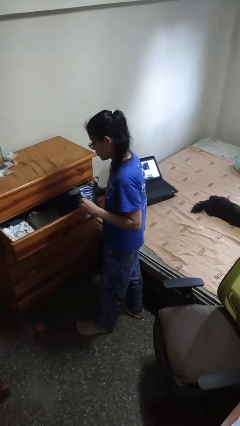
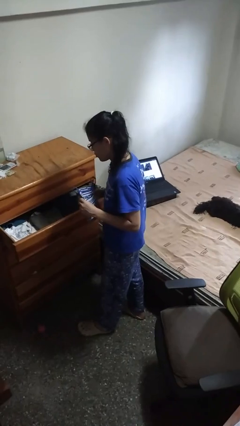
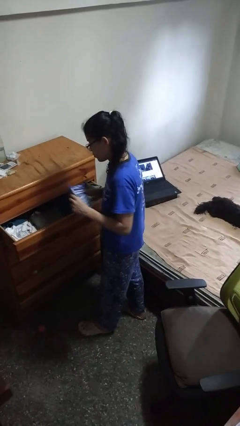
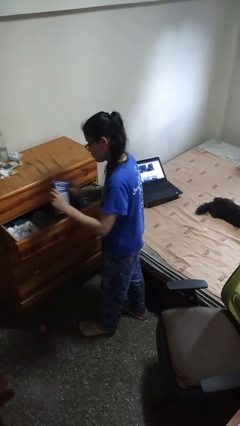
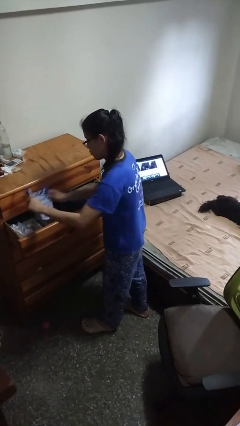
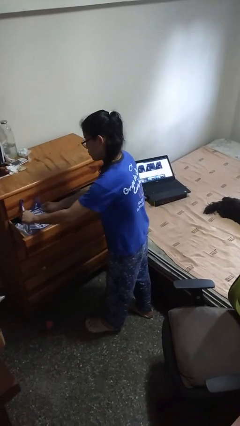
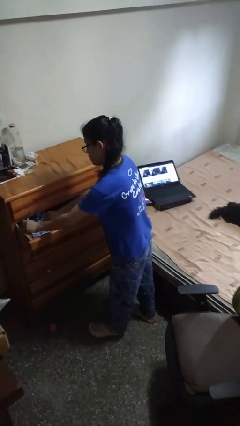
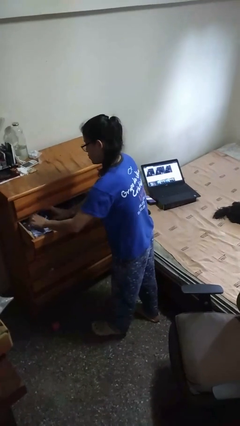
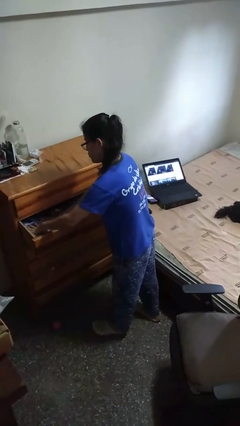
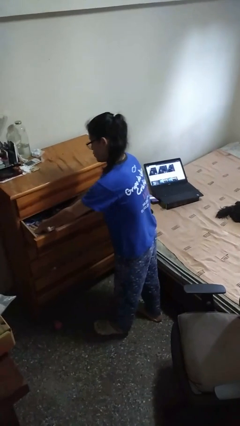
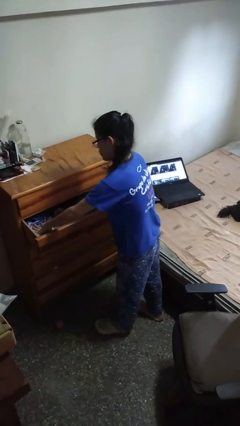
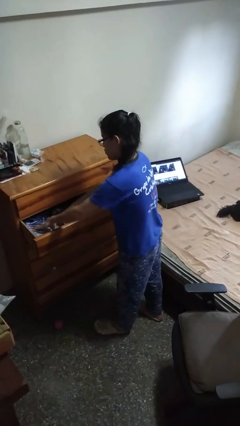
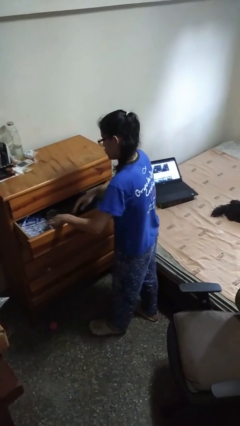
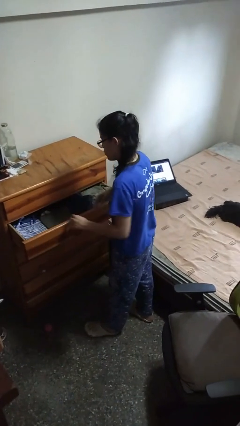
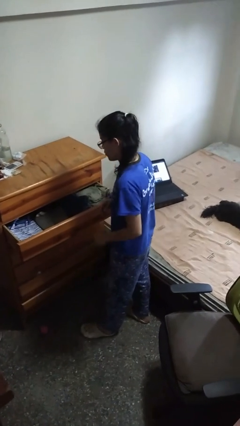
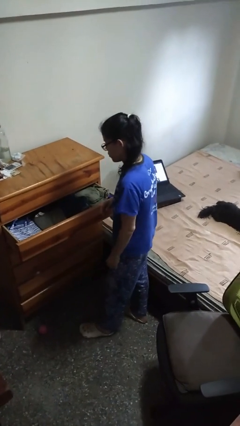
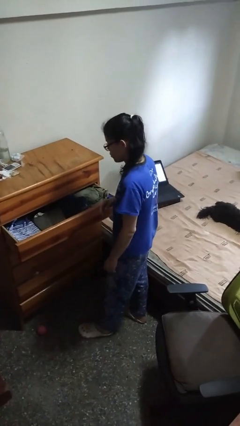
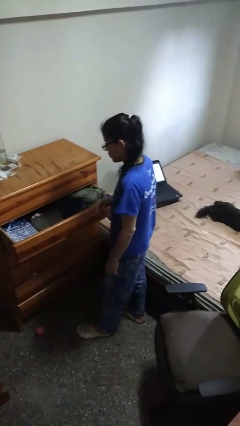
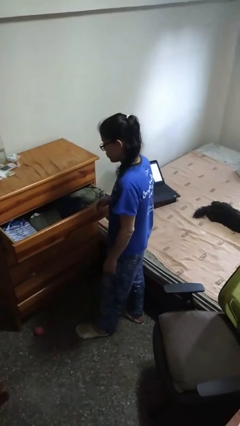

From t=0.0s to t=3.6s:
person puts clothes into dresser

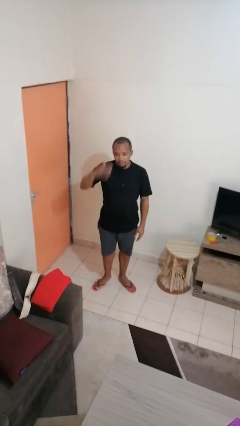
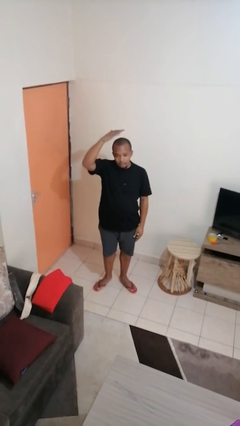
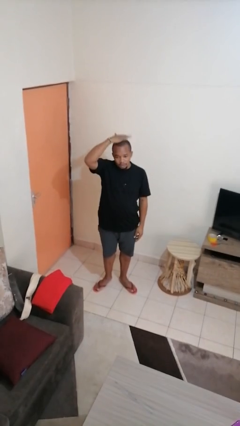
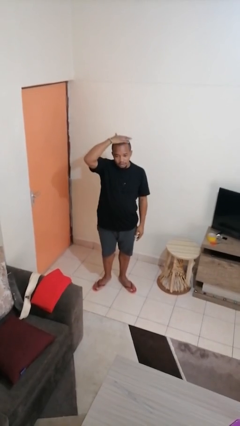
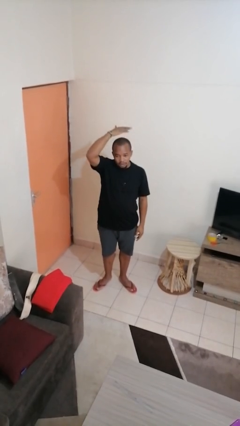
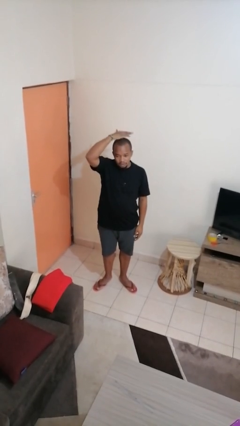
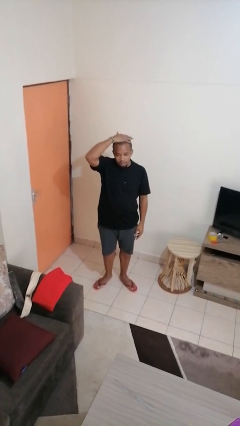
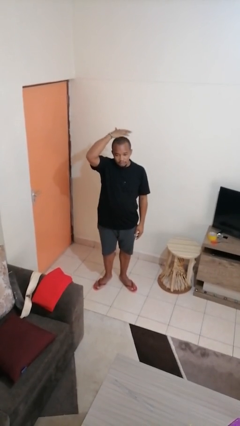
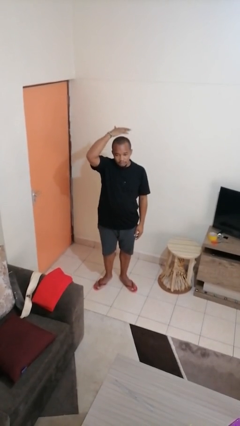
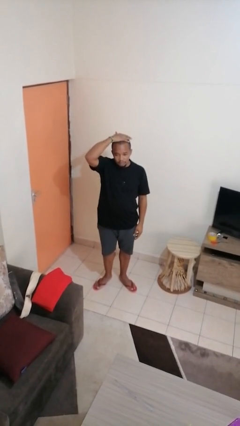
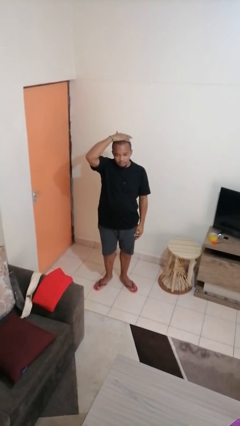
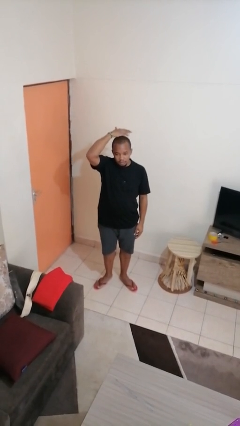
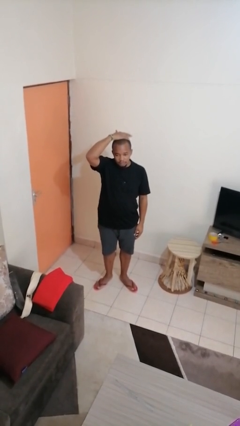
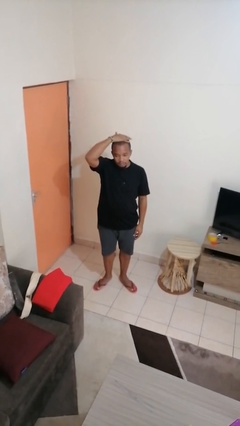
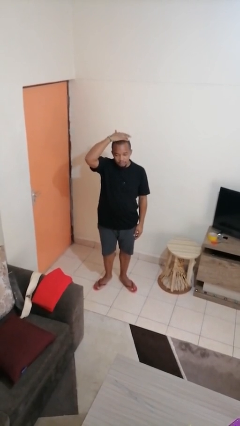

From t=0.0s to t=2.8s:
person pats head

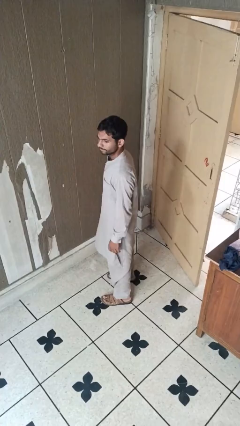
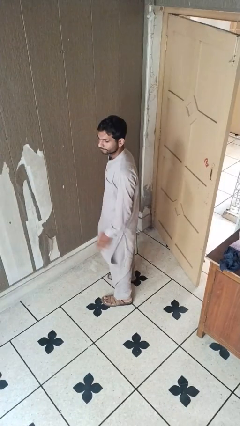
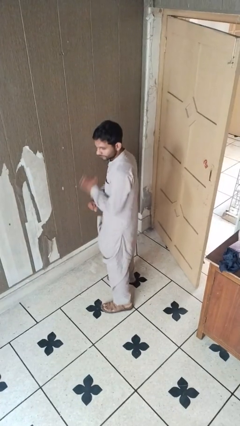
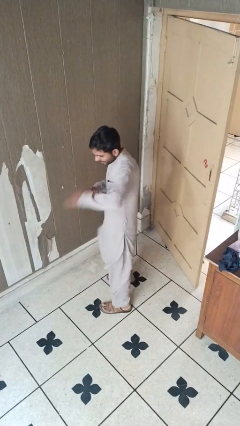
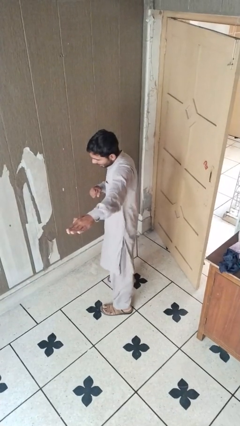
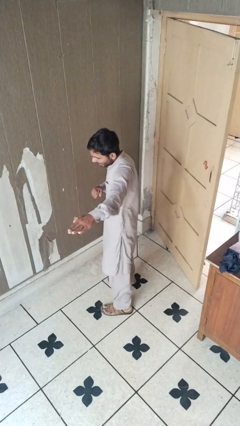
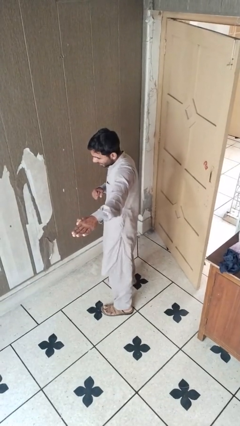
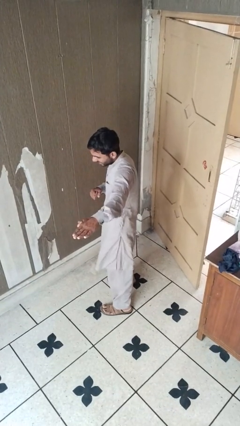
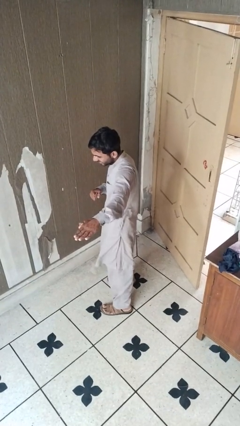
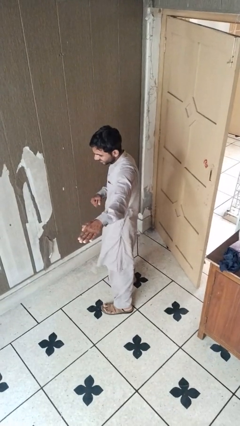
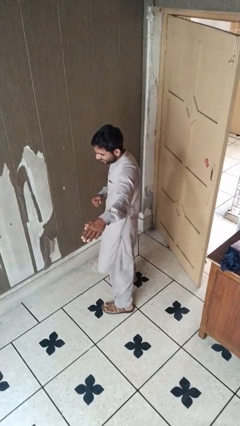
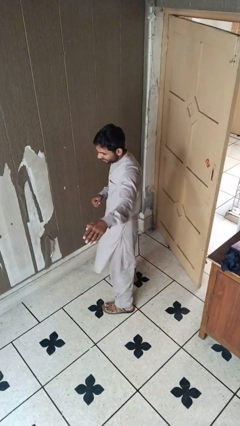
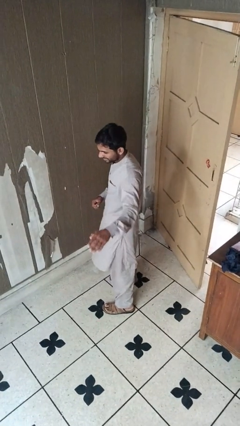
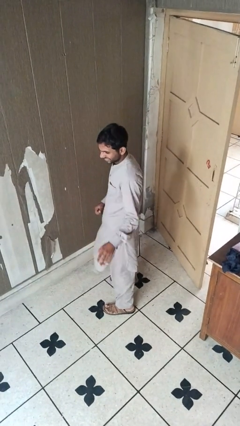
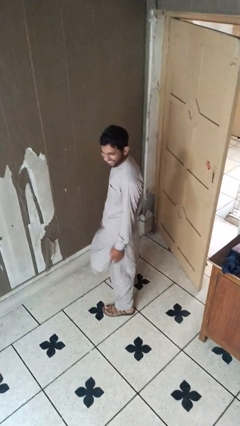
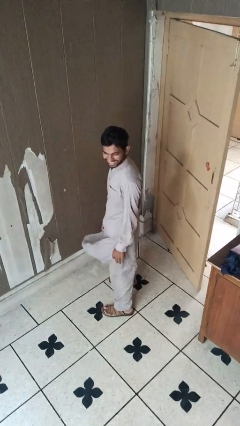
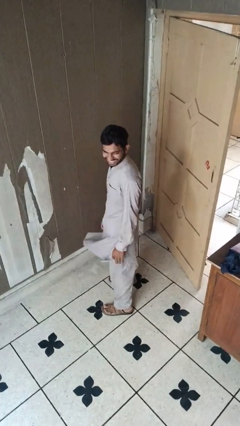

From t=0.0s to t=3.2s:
person karate chop

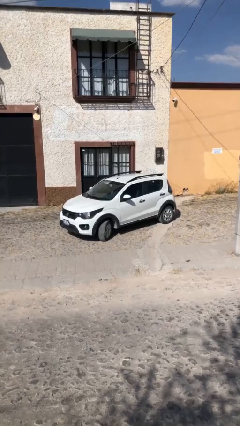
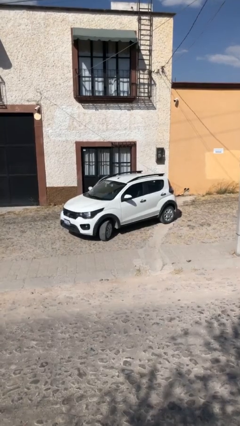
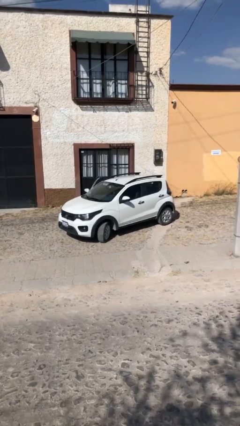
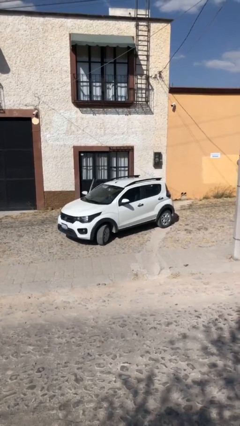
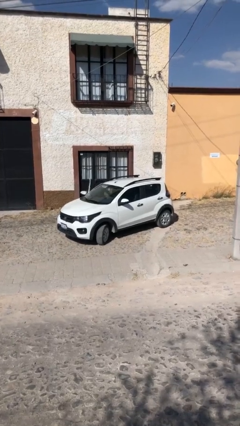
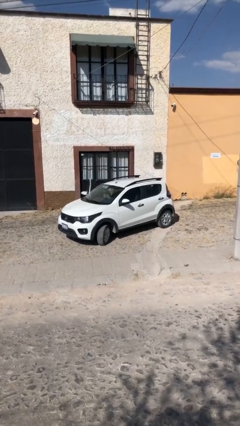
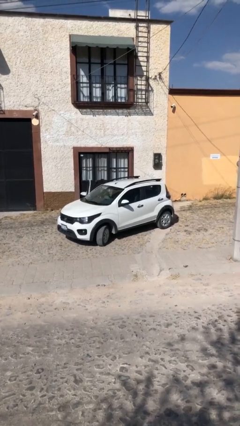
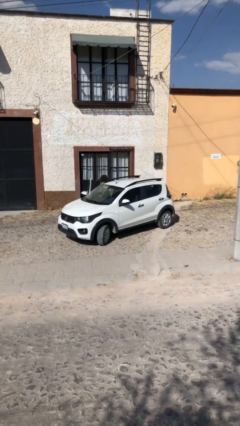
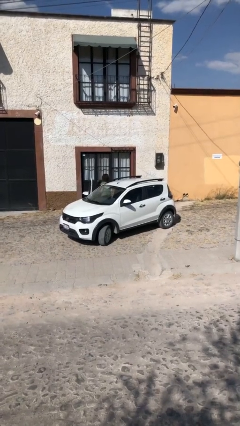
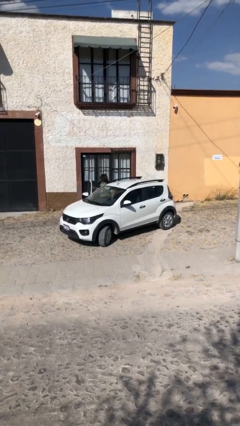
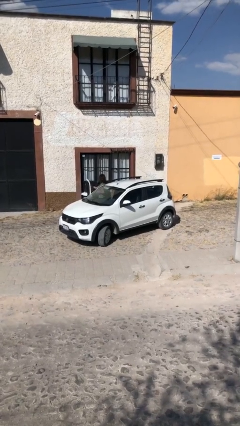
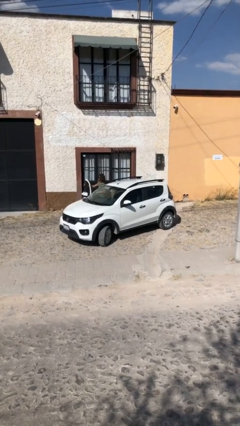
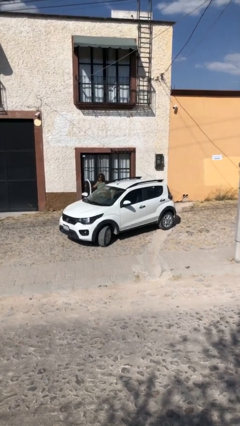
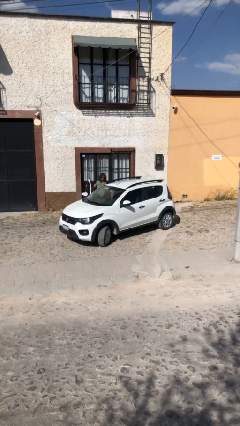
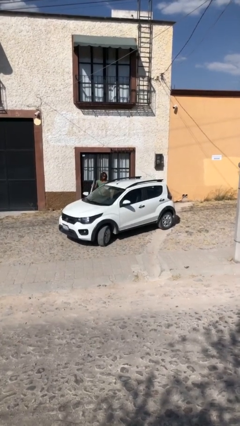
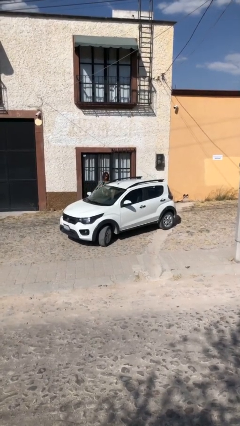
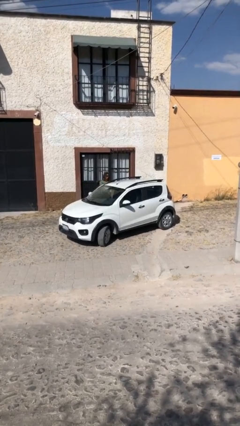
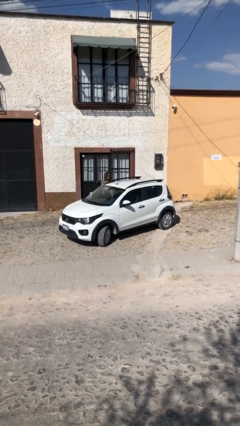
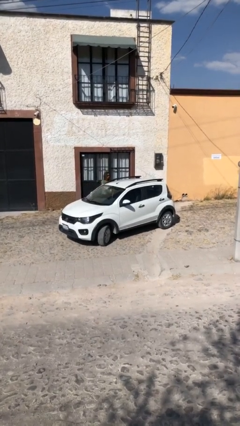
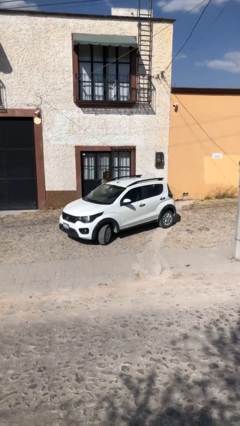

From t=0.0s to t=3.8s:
car drops off person

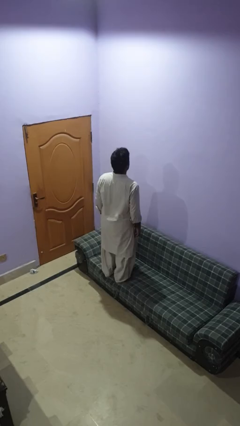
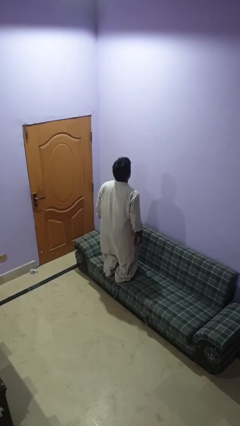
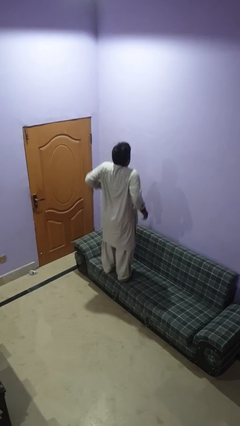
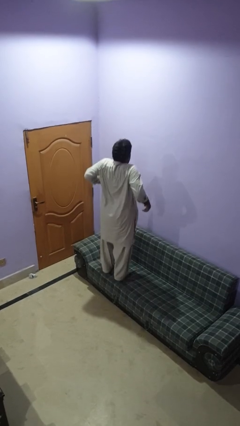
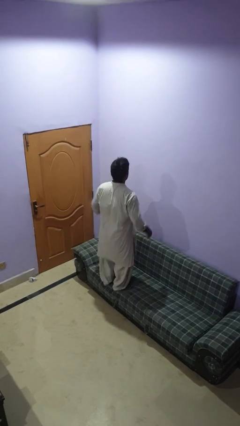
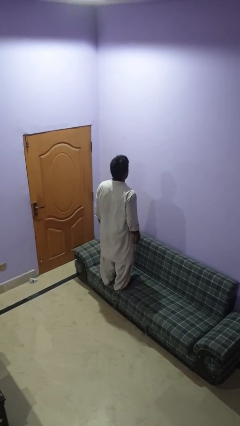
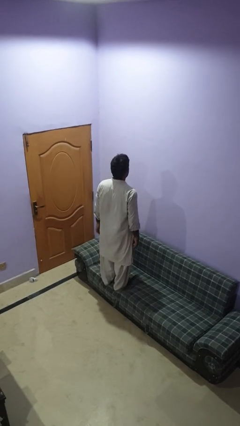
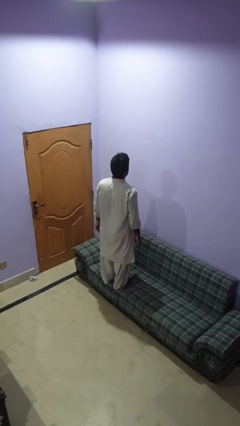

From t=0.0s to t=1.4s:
person jumps on couch

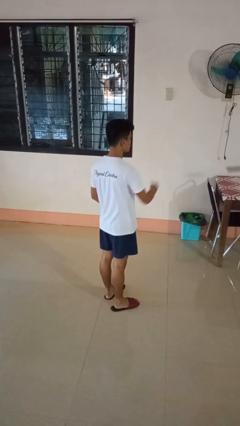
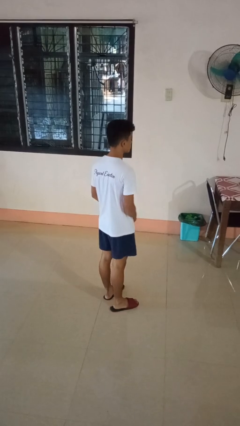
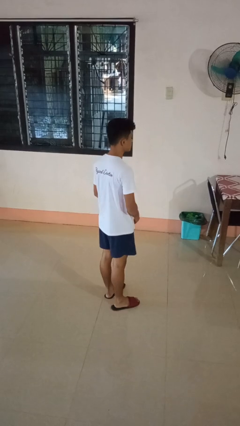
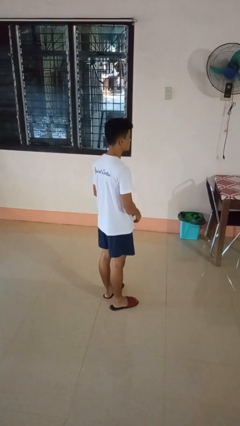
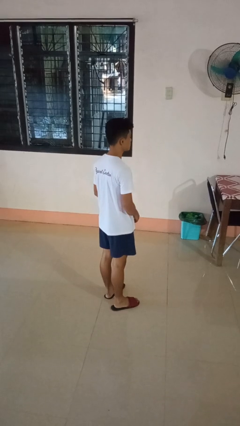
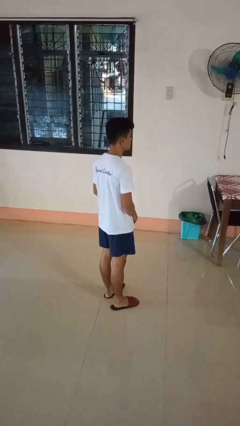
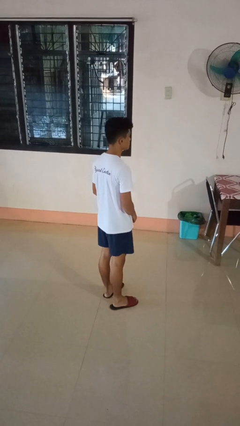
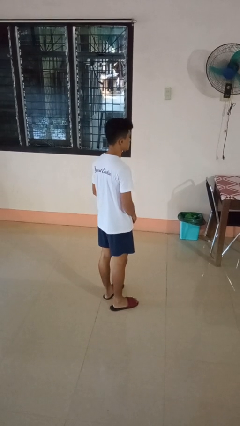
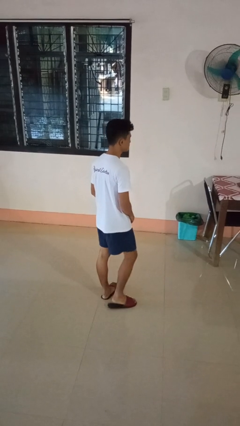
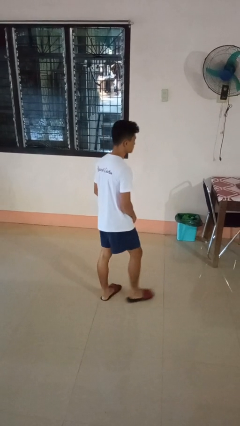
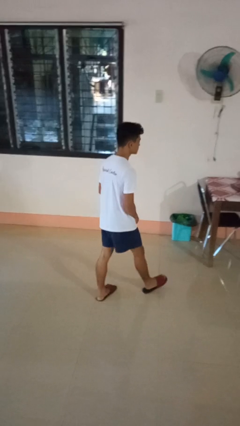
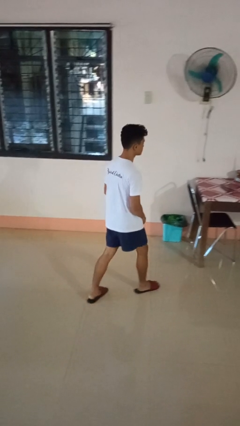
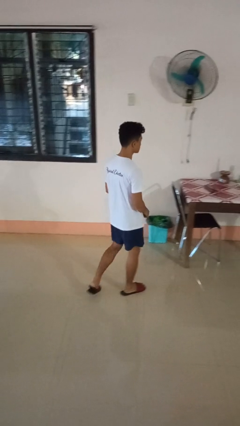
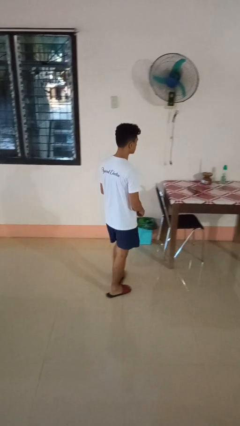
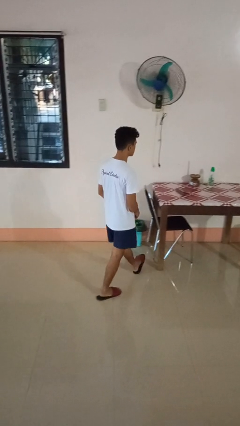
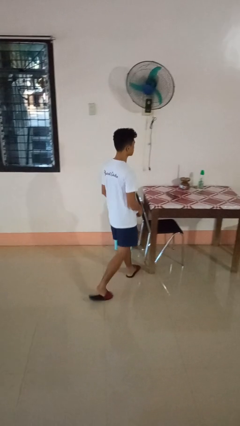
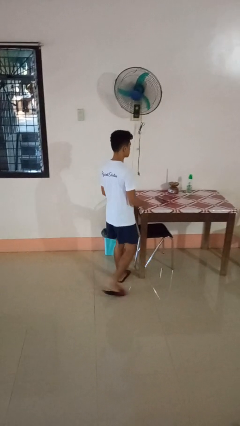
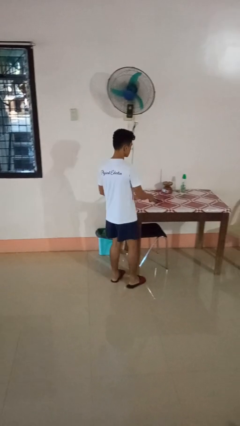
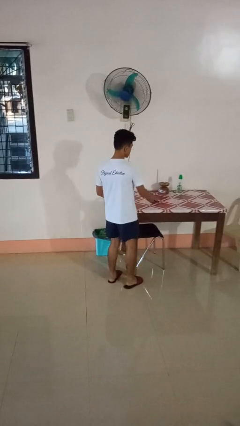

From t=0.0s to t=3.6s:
person throws object on table
